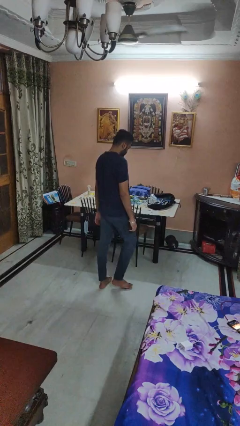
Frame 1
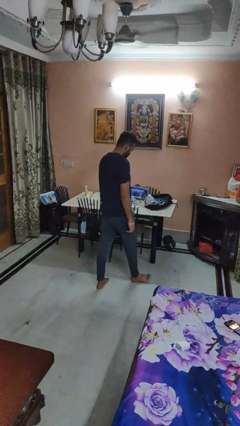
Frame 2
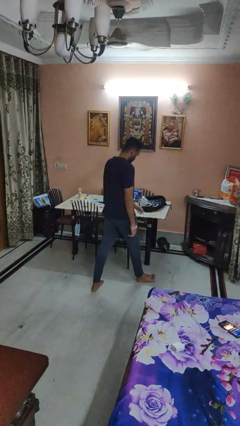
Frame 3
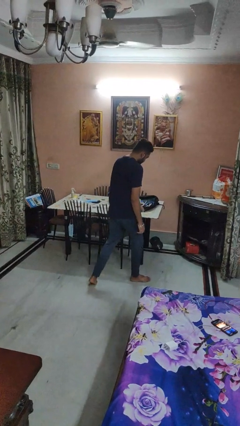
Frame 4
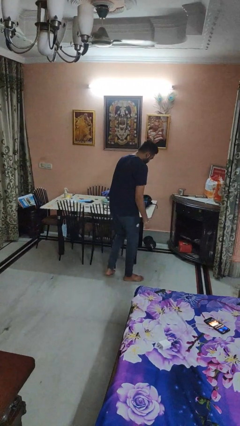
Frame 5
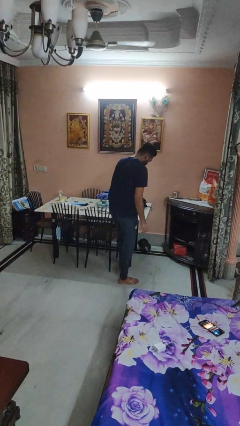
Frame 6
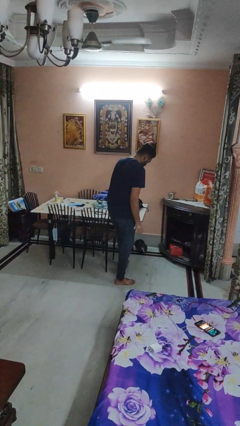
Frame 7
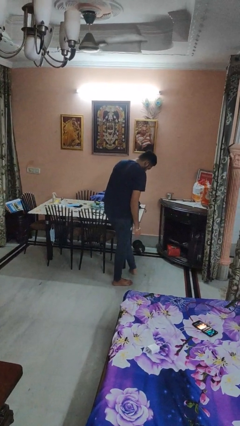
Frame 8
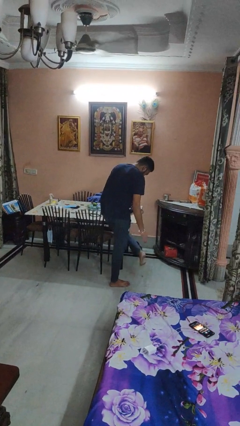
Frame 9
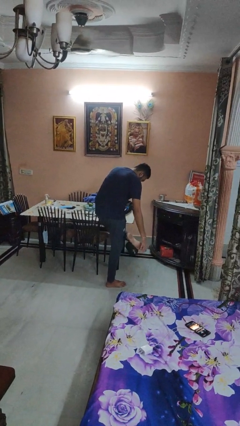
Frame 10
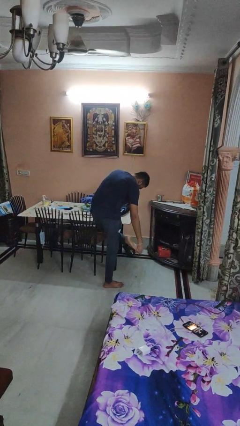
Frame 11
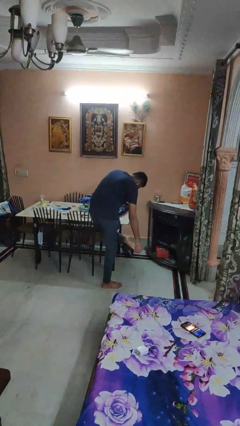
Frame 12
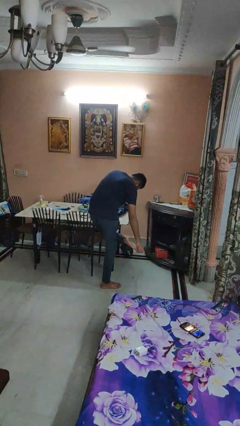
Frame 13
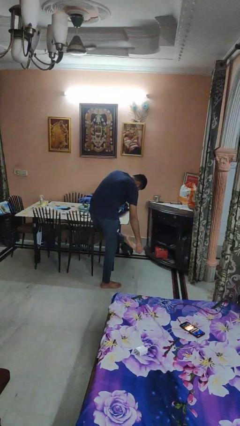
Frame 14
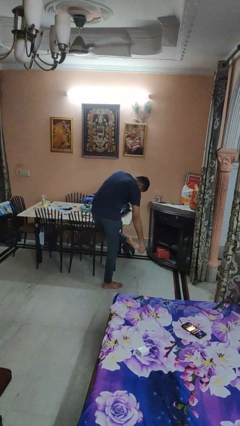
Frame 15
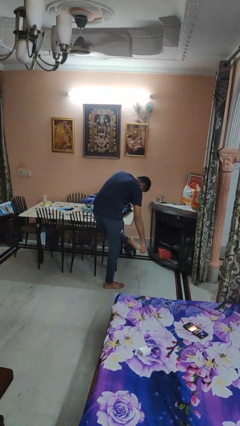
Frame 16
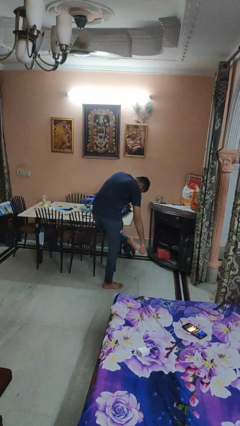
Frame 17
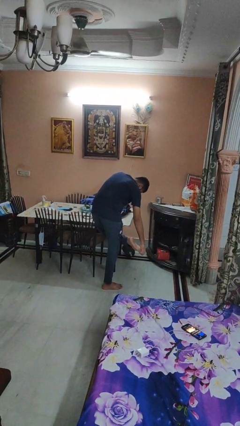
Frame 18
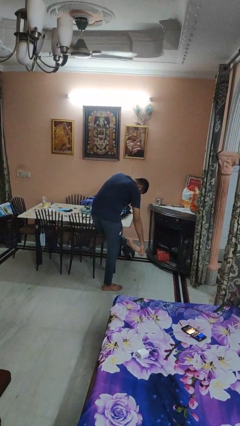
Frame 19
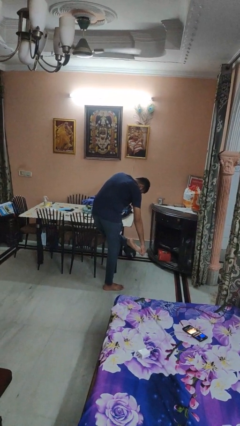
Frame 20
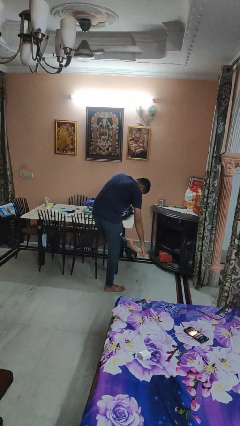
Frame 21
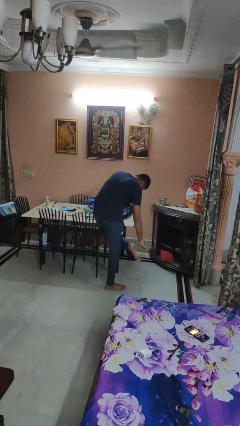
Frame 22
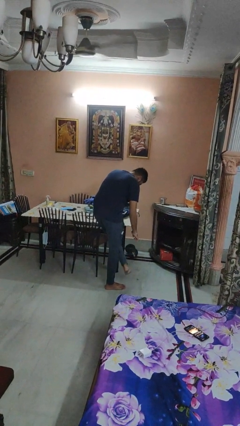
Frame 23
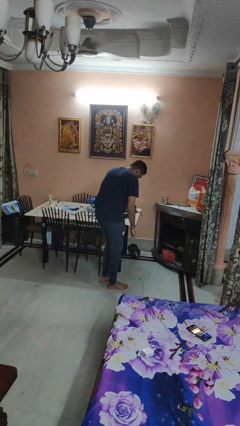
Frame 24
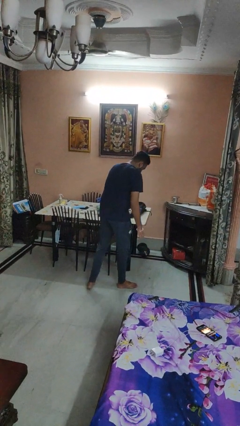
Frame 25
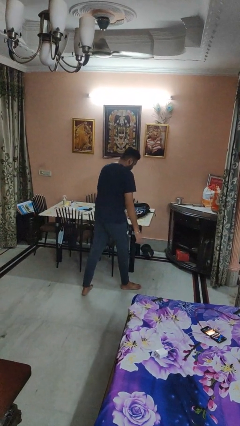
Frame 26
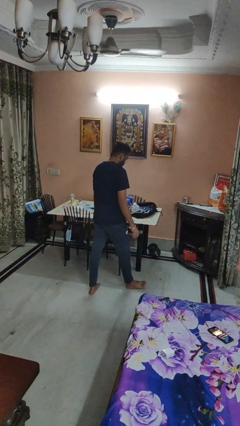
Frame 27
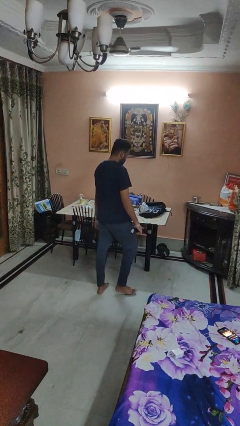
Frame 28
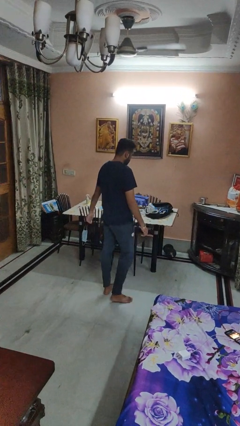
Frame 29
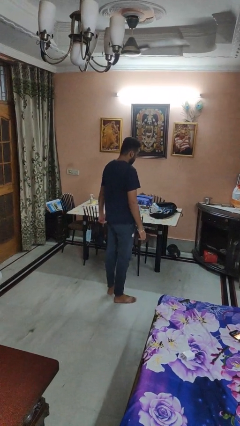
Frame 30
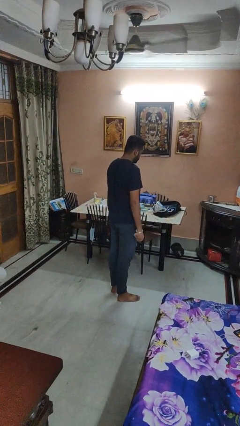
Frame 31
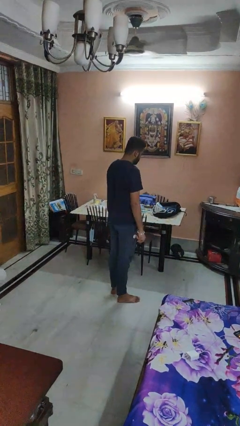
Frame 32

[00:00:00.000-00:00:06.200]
person bumps into table

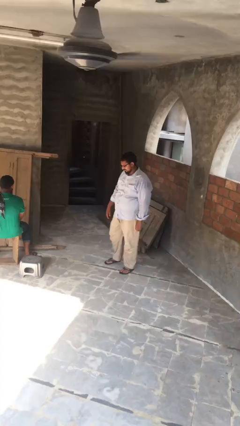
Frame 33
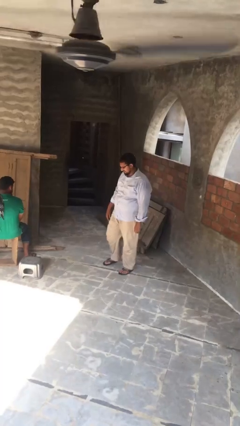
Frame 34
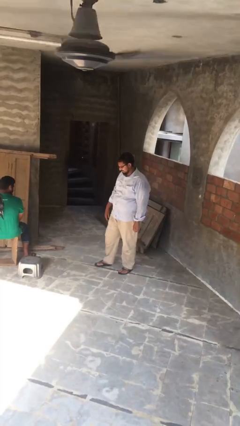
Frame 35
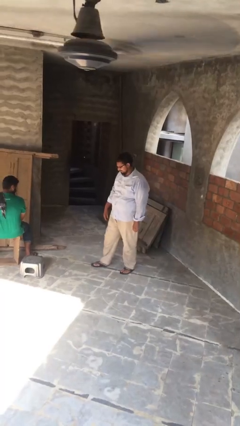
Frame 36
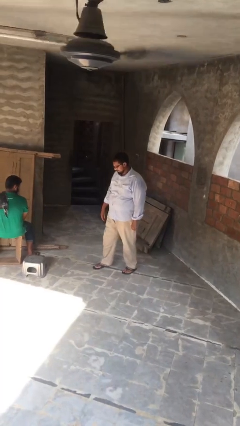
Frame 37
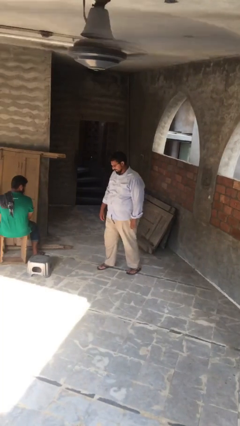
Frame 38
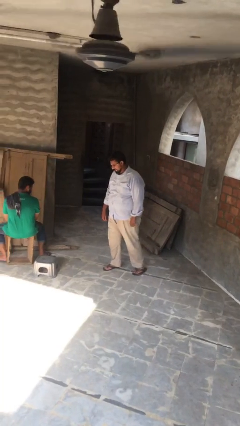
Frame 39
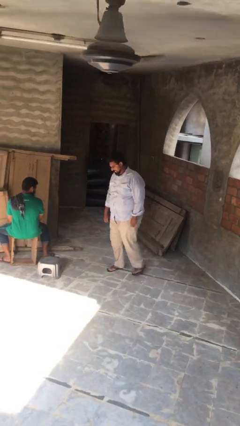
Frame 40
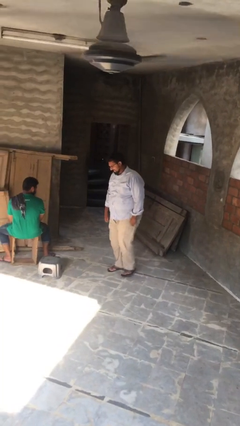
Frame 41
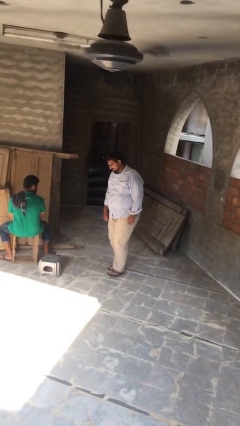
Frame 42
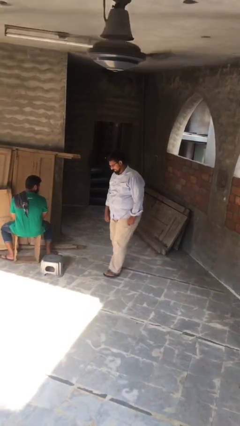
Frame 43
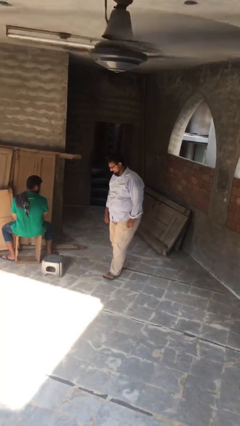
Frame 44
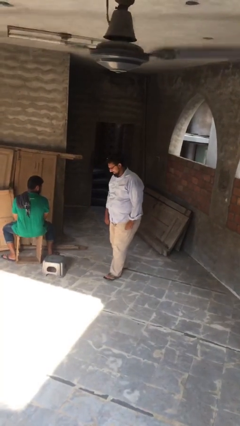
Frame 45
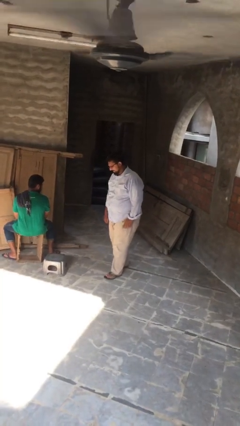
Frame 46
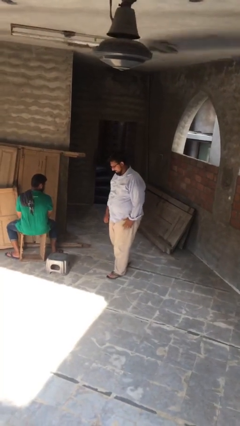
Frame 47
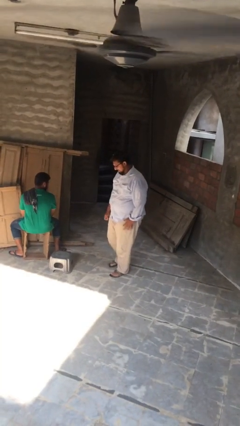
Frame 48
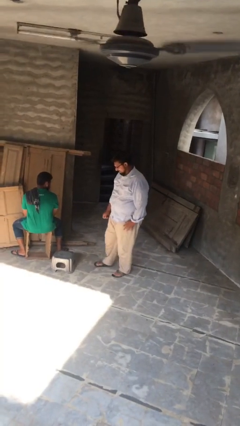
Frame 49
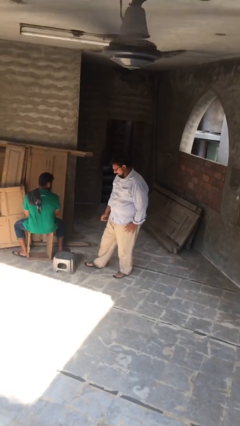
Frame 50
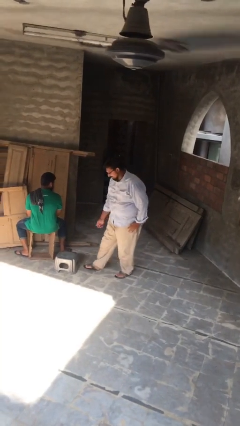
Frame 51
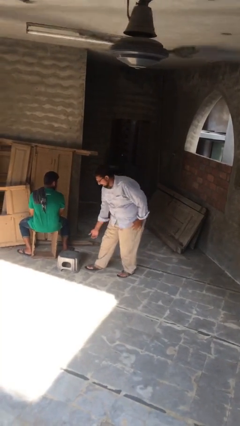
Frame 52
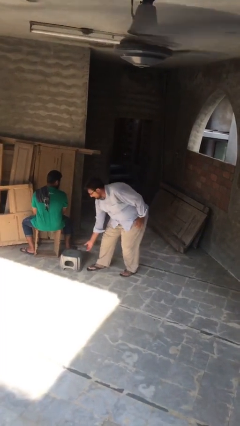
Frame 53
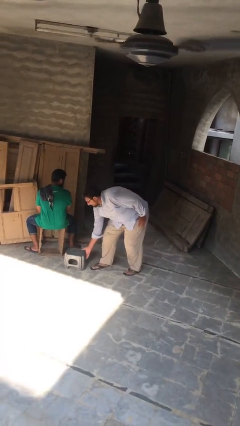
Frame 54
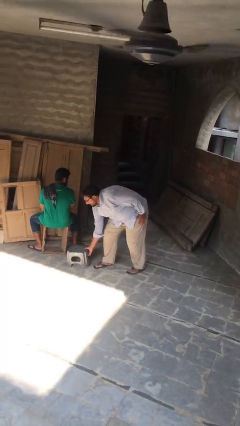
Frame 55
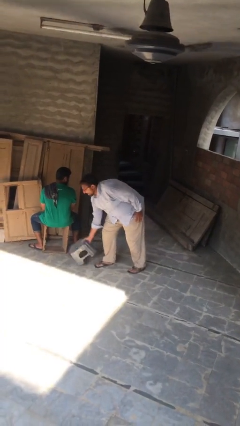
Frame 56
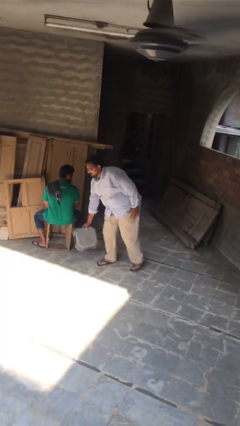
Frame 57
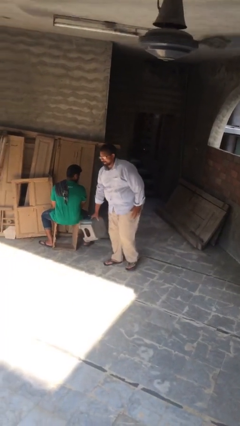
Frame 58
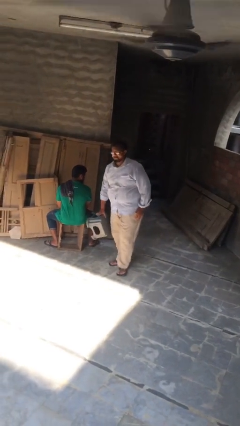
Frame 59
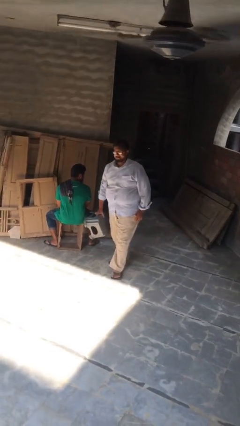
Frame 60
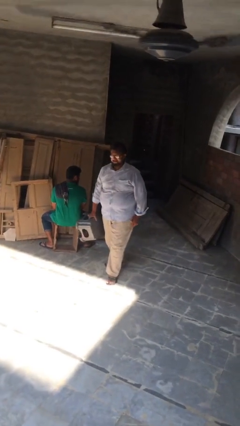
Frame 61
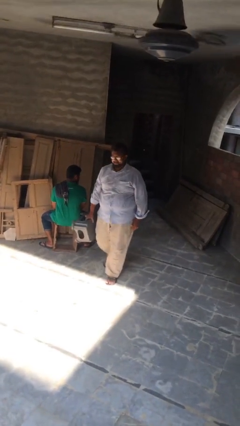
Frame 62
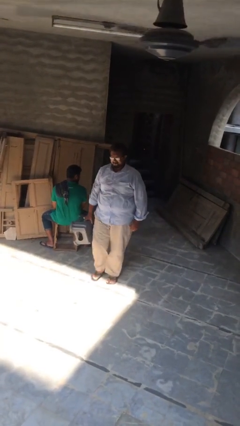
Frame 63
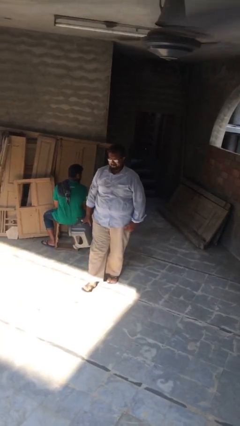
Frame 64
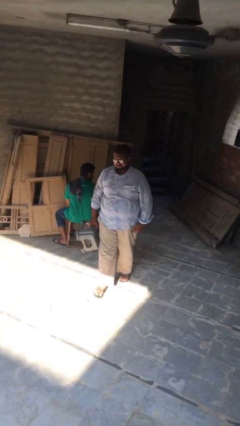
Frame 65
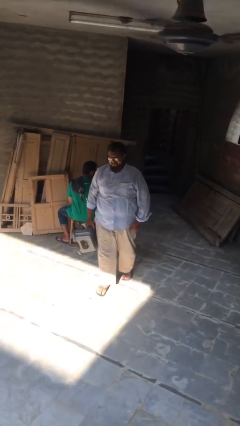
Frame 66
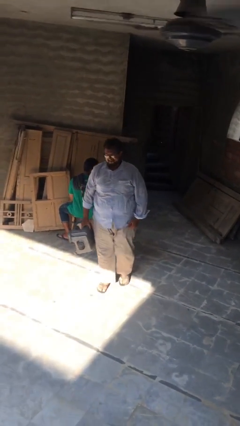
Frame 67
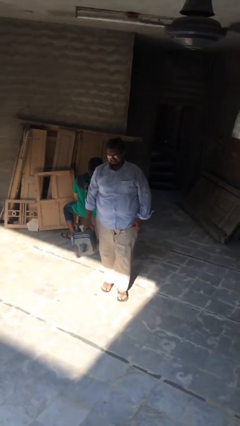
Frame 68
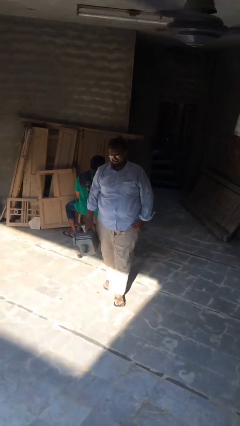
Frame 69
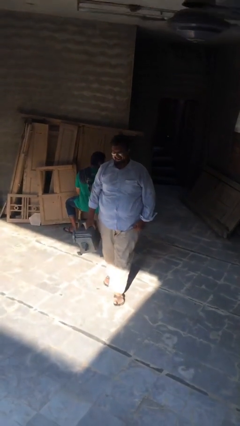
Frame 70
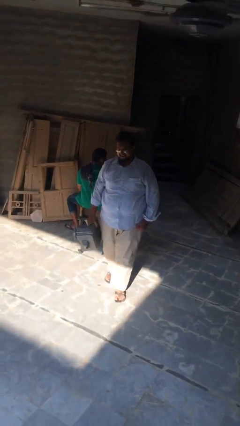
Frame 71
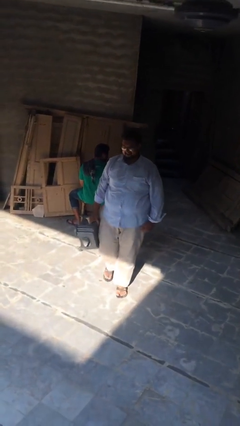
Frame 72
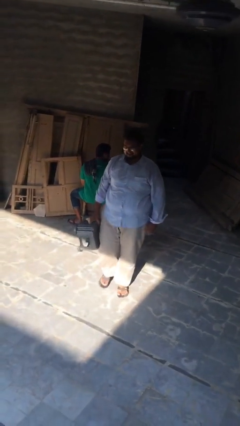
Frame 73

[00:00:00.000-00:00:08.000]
person steals object from person

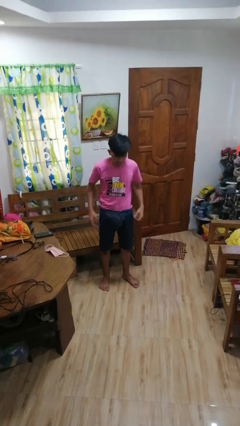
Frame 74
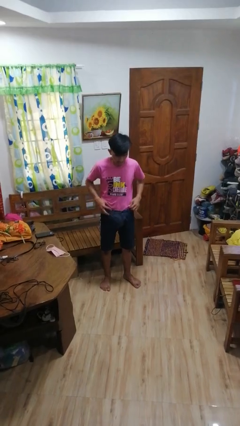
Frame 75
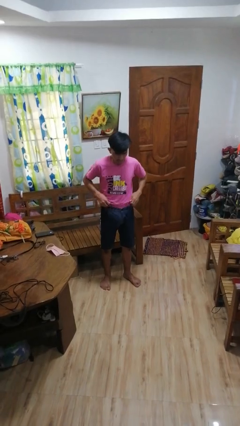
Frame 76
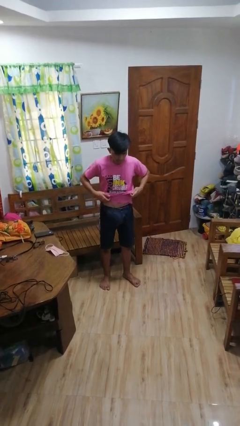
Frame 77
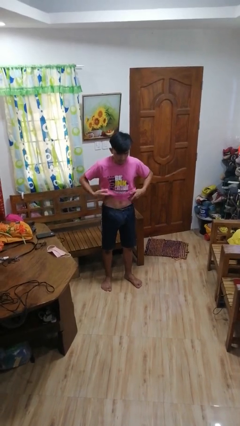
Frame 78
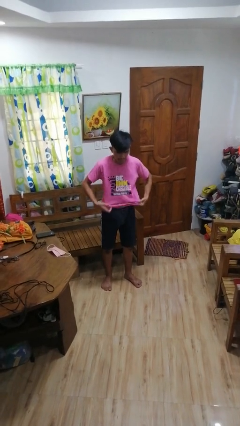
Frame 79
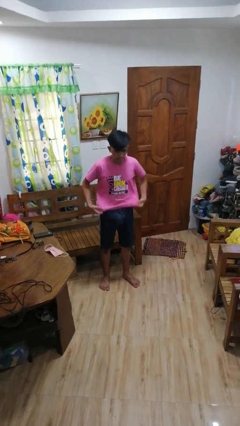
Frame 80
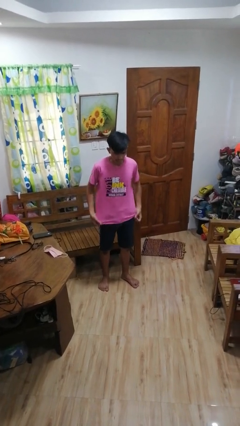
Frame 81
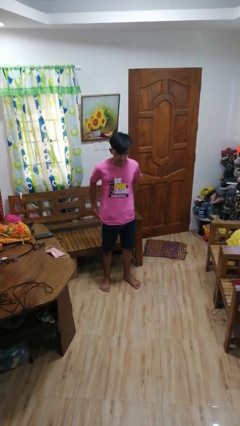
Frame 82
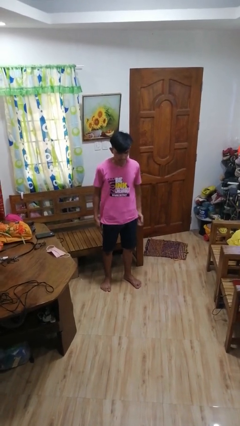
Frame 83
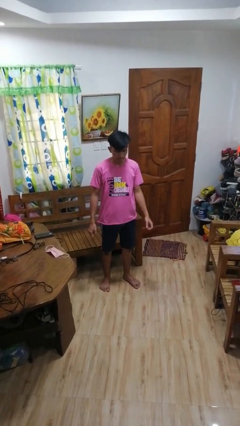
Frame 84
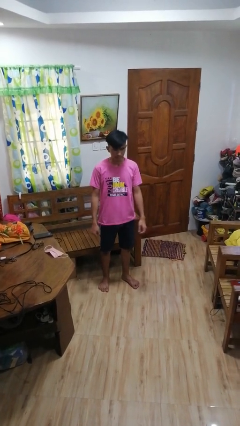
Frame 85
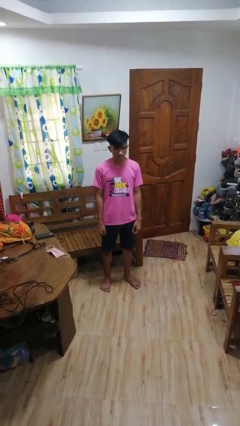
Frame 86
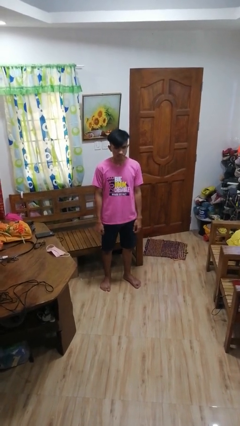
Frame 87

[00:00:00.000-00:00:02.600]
person untucks shirt

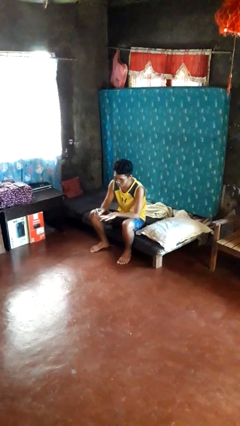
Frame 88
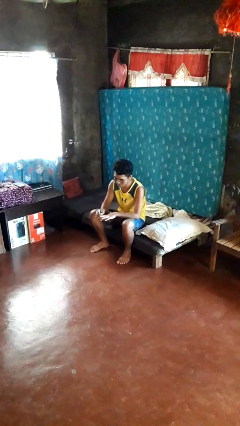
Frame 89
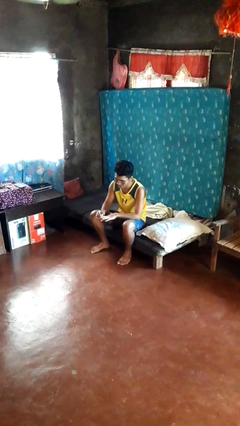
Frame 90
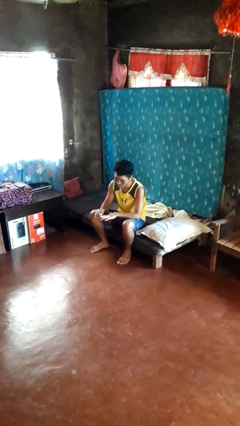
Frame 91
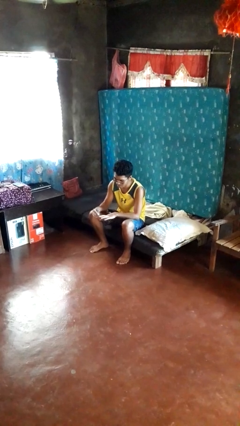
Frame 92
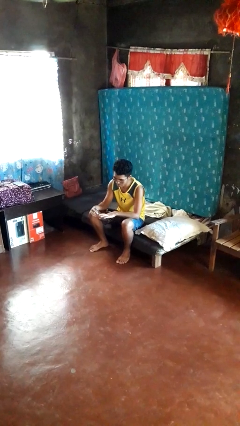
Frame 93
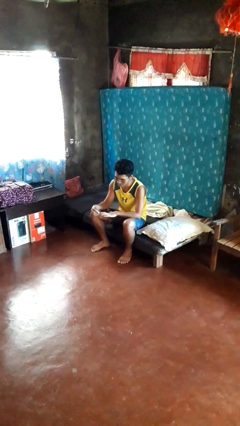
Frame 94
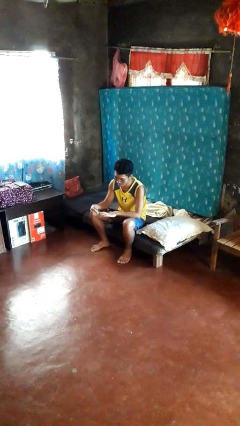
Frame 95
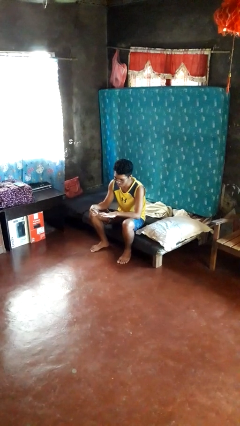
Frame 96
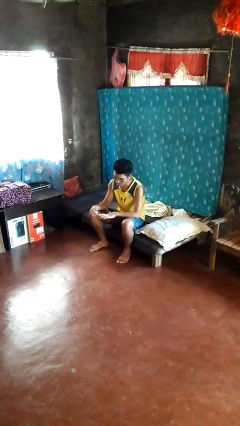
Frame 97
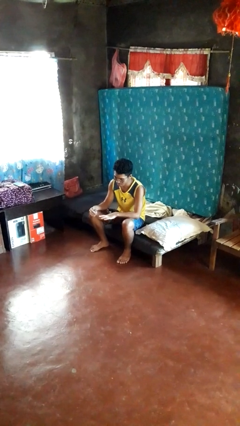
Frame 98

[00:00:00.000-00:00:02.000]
person files fingernails
